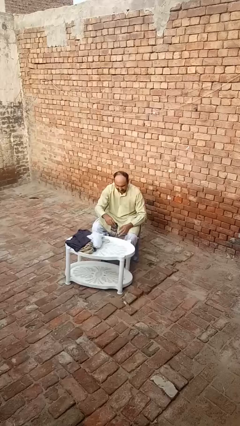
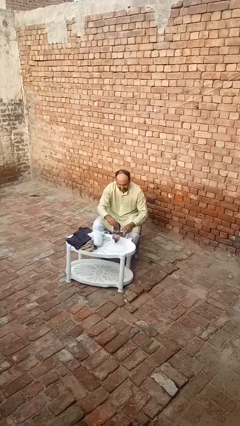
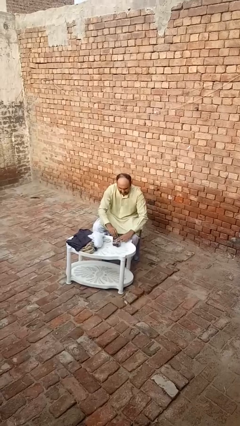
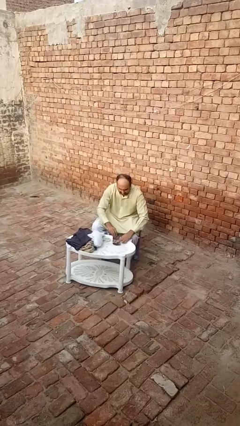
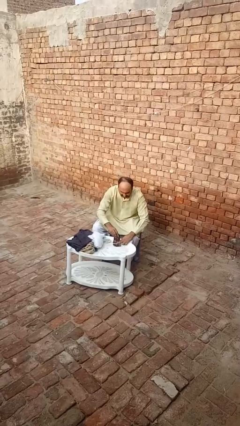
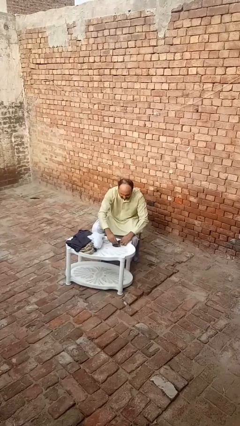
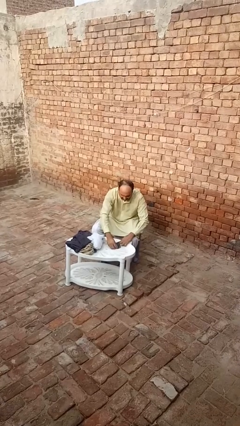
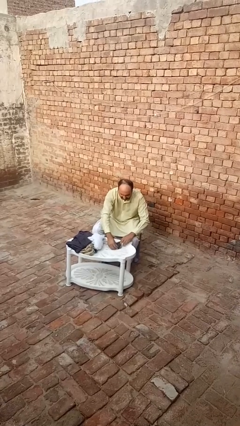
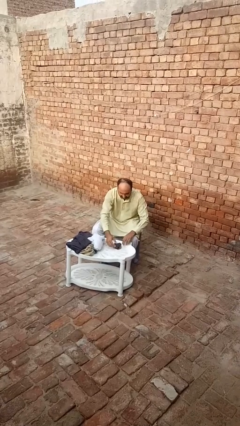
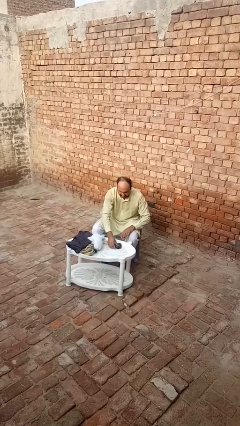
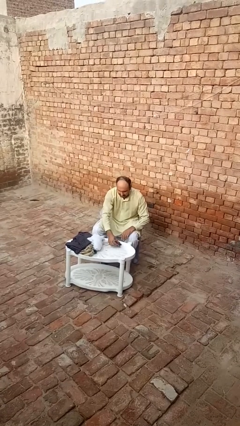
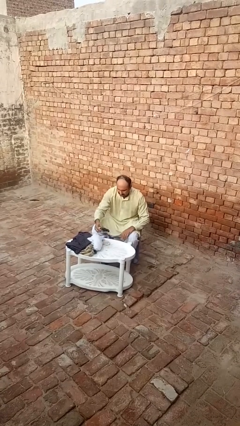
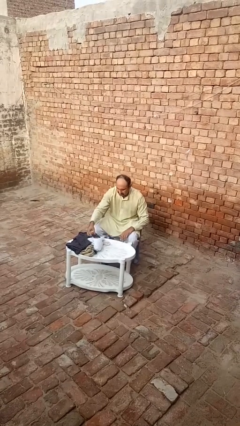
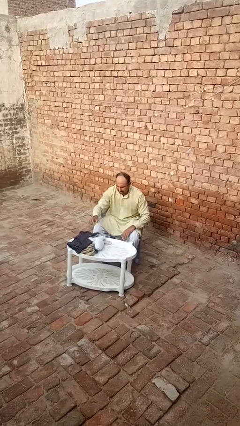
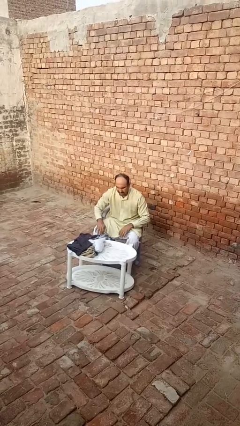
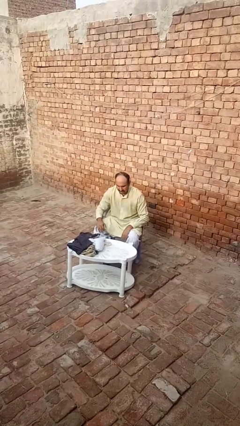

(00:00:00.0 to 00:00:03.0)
person folds socks

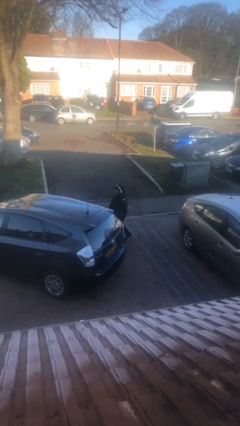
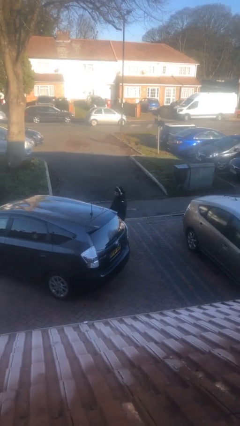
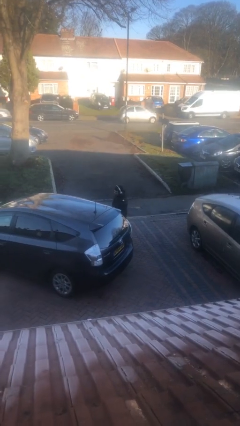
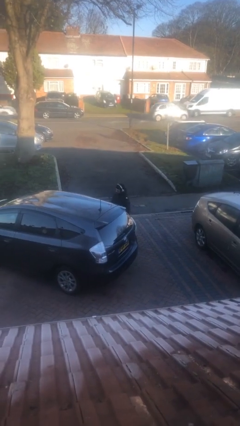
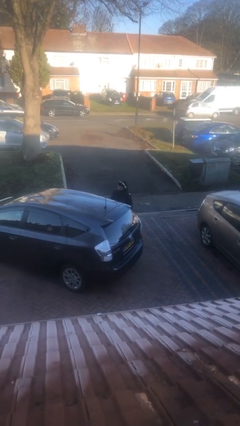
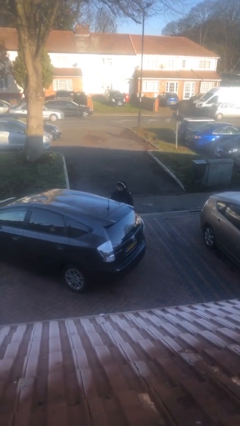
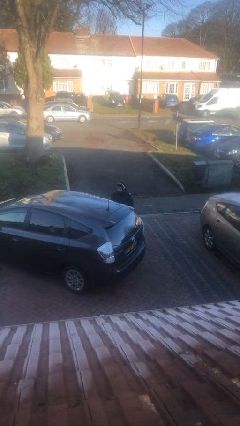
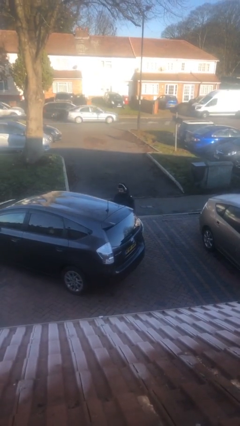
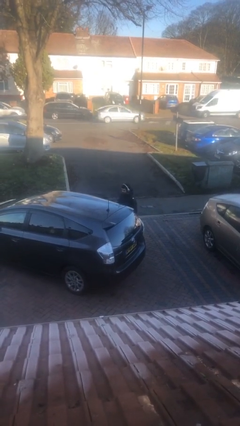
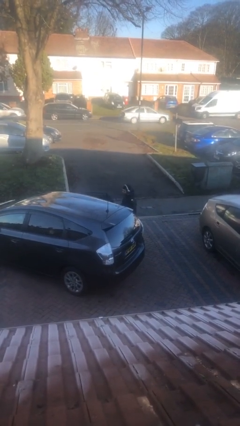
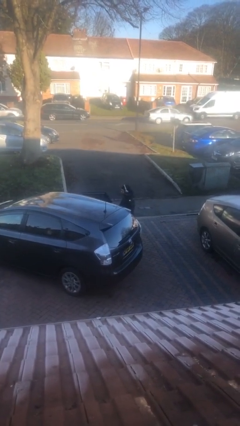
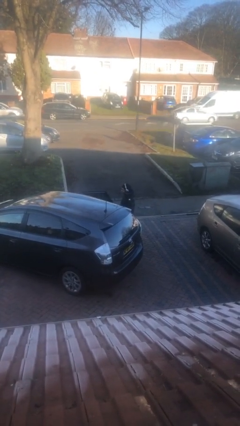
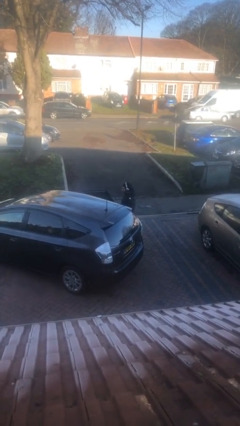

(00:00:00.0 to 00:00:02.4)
person opens car door

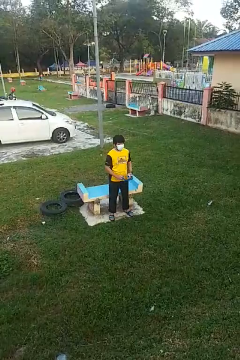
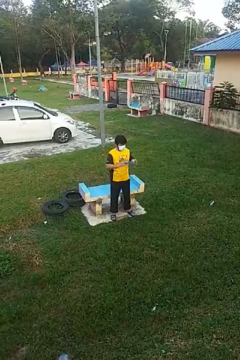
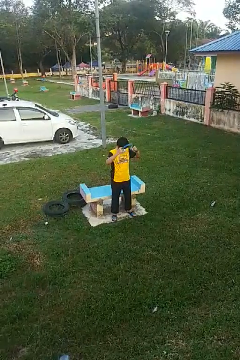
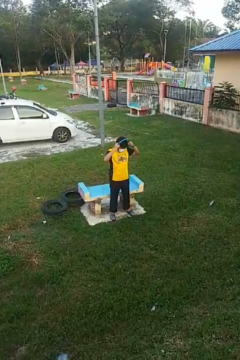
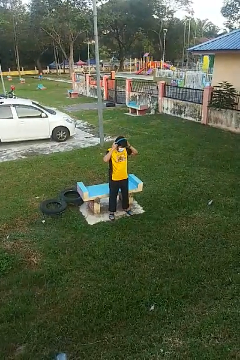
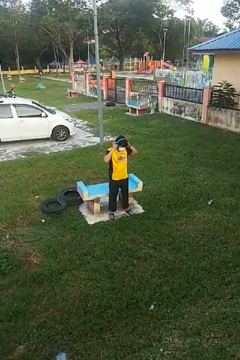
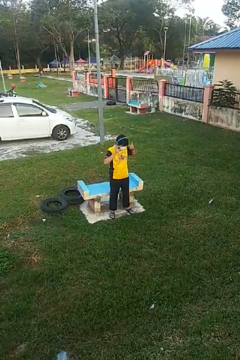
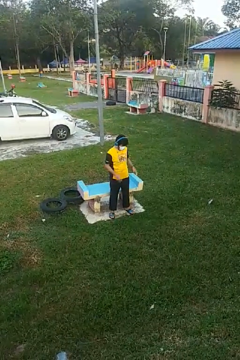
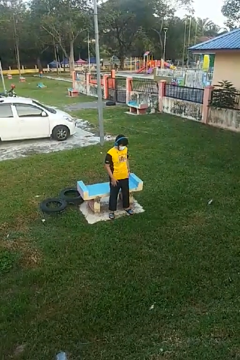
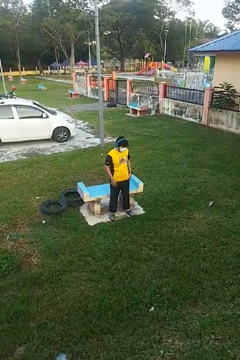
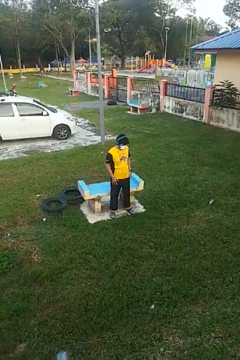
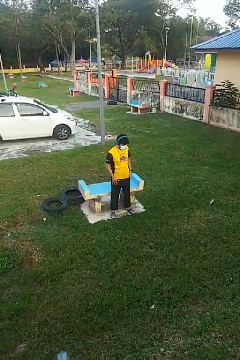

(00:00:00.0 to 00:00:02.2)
person puts on headphones

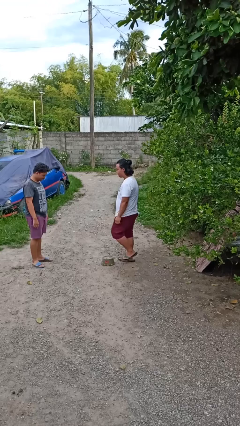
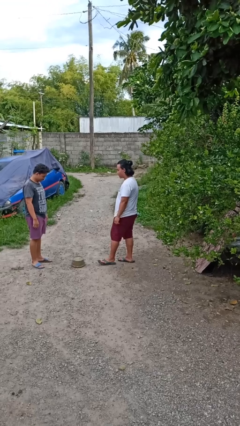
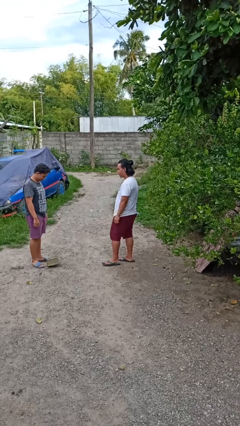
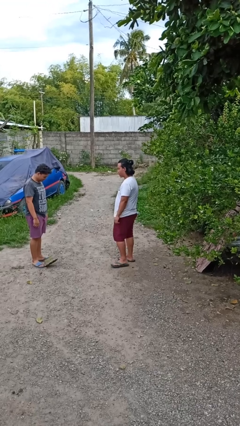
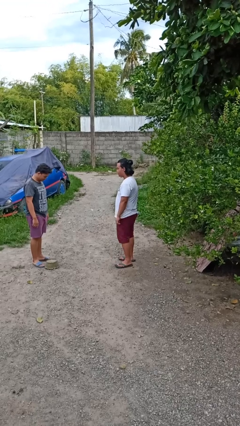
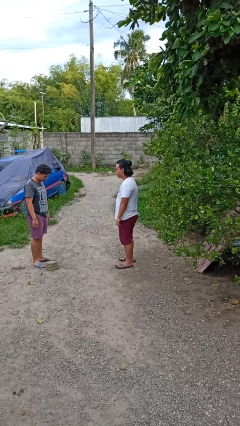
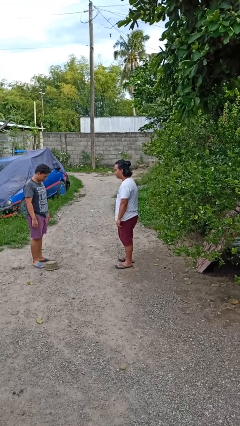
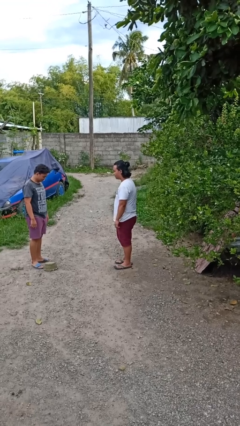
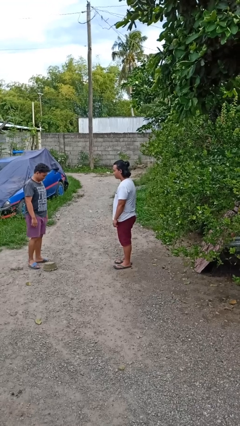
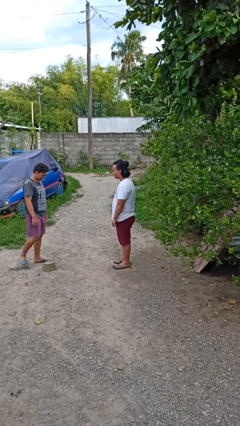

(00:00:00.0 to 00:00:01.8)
person kicks object to person

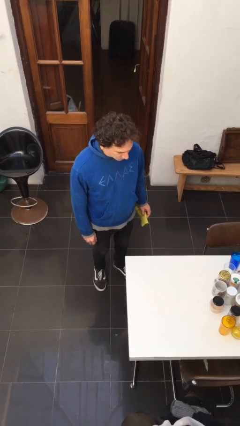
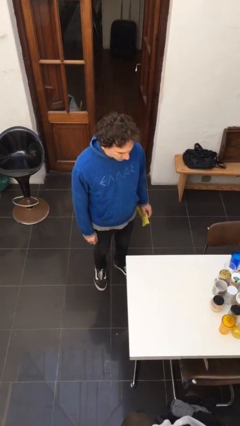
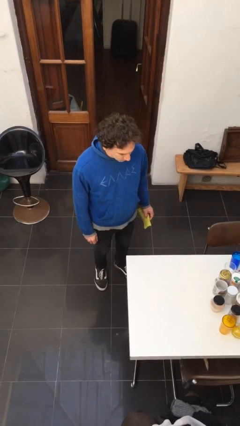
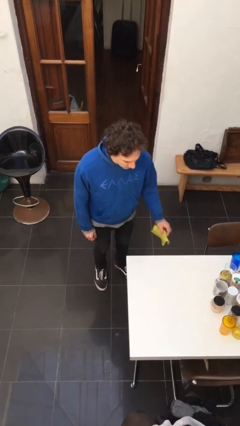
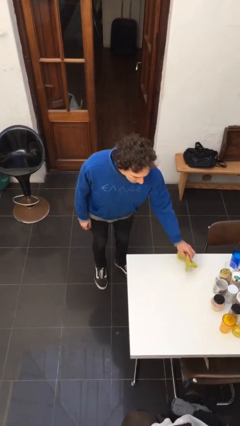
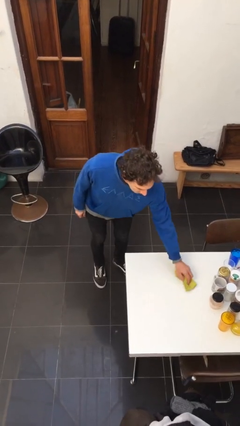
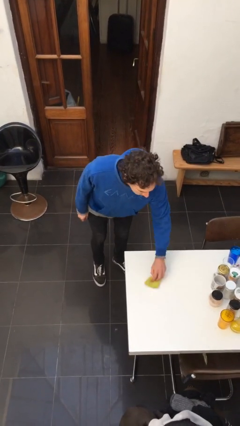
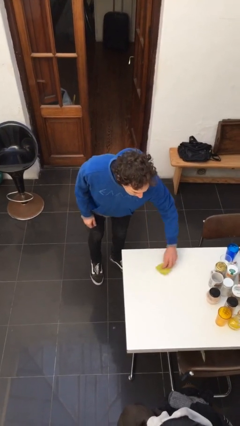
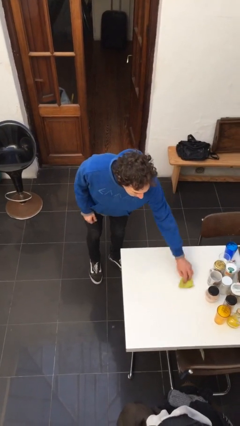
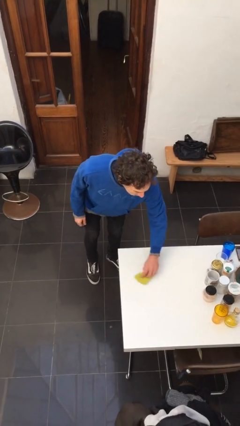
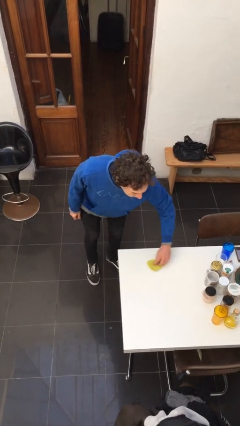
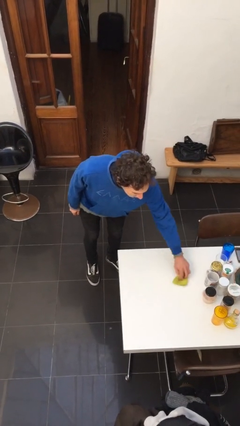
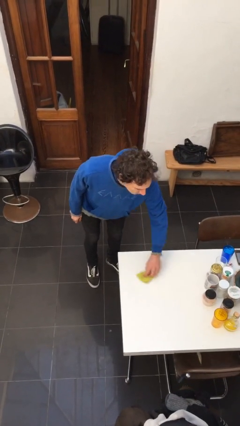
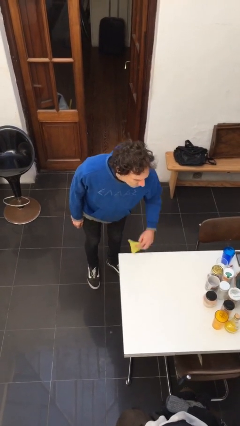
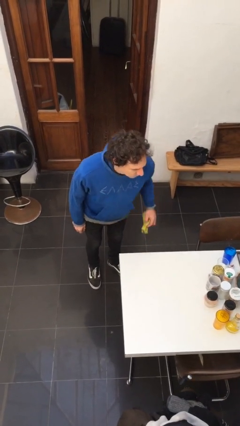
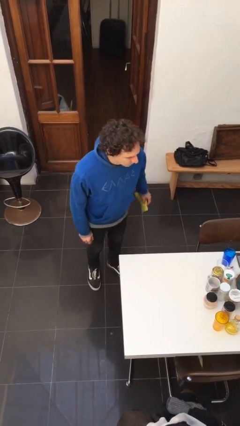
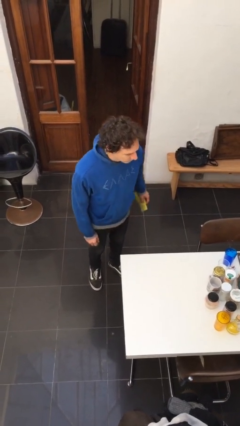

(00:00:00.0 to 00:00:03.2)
person cleans table with rag

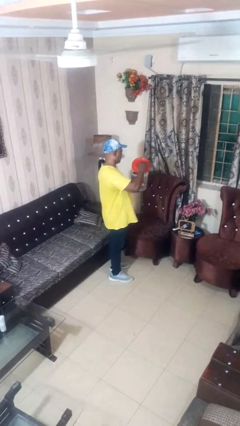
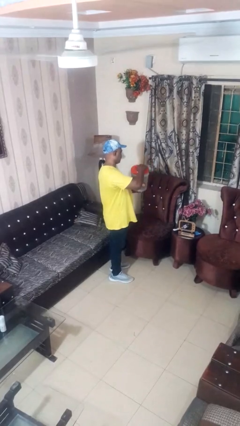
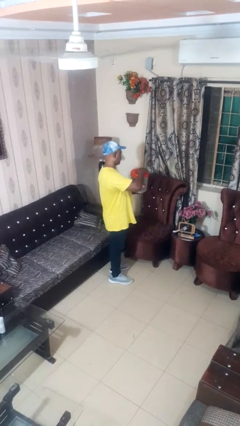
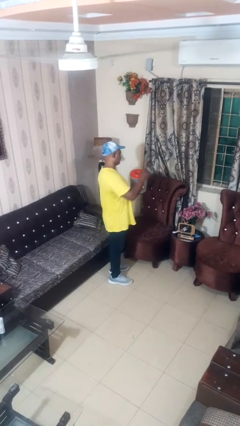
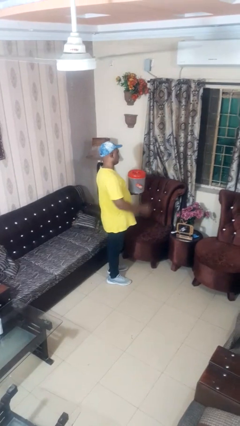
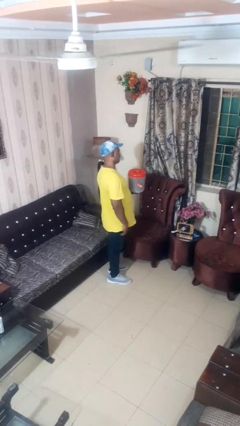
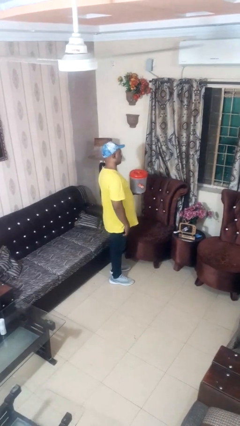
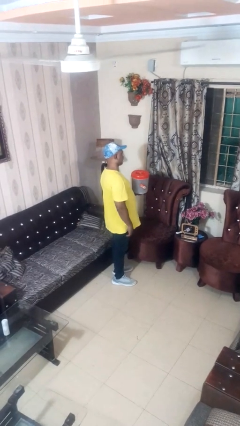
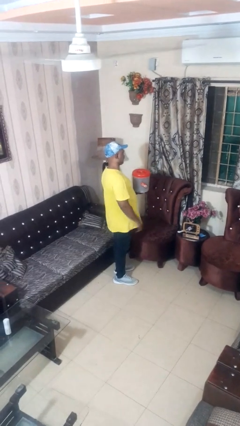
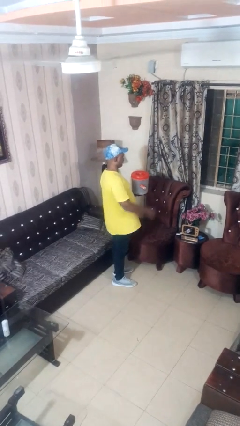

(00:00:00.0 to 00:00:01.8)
person closes jar

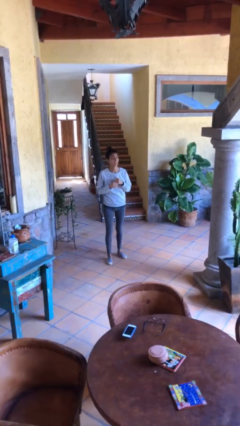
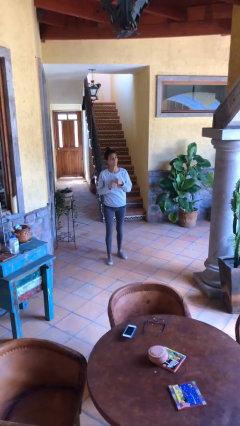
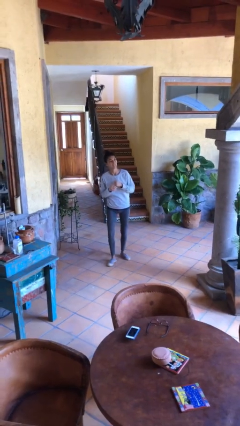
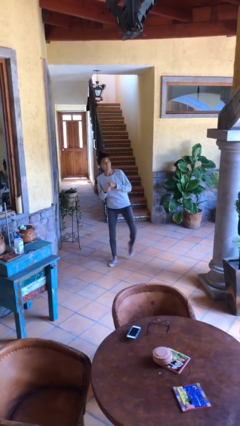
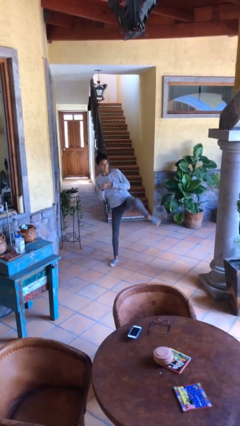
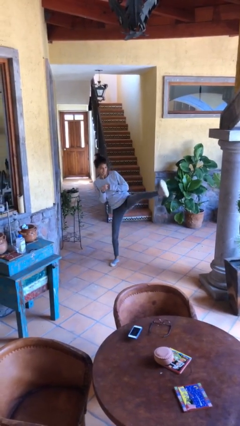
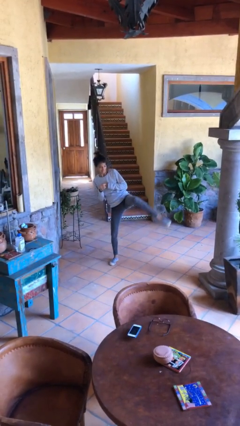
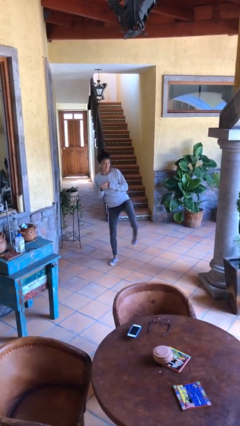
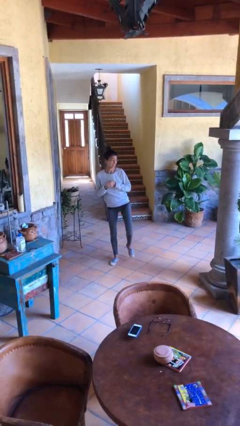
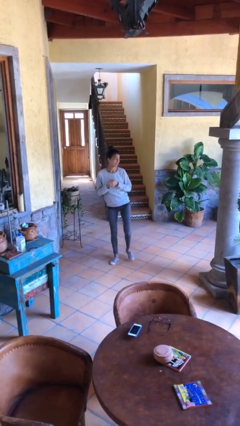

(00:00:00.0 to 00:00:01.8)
person karate kicks

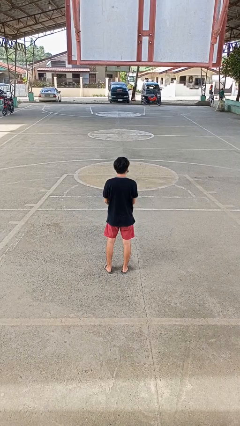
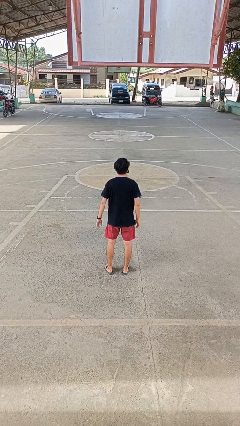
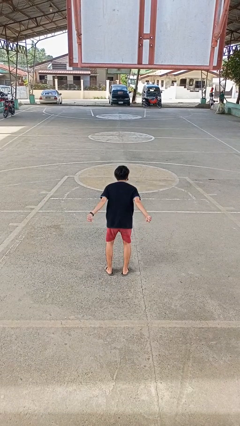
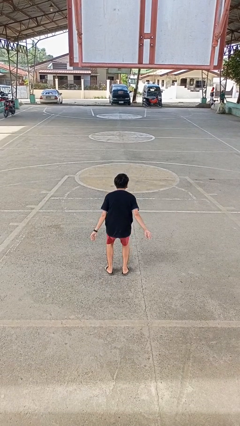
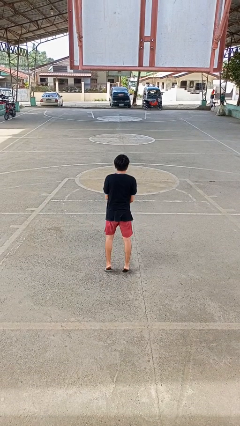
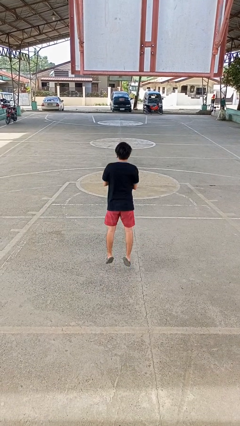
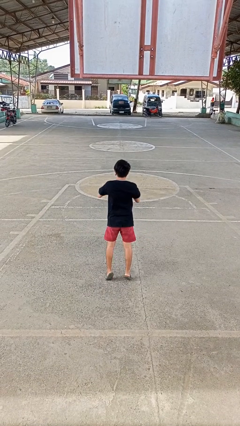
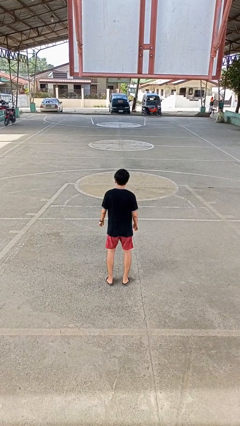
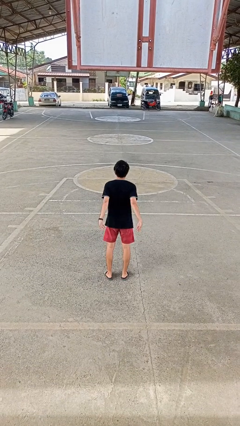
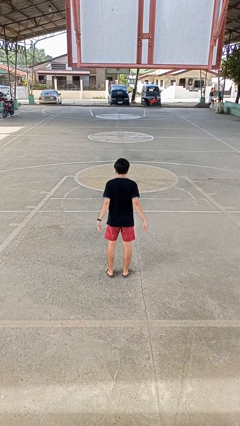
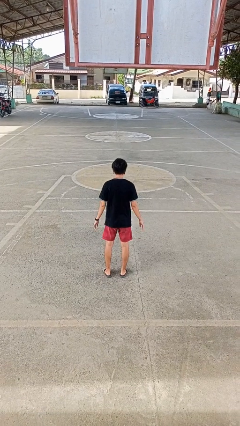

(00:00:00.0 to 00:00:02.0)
person jumps
